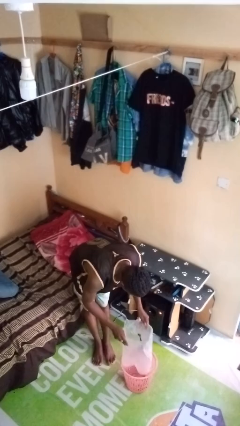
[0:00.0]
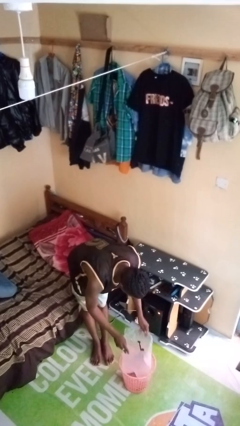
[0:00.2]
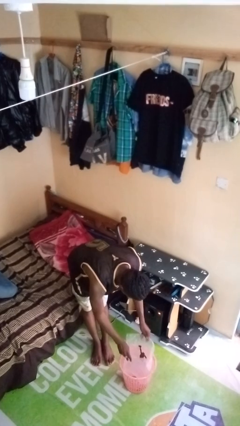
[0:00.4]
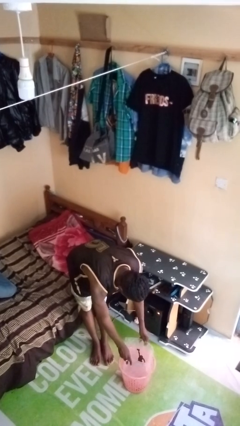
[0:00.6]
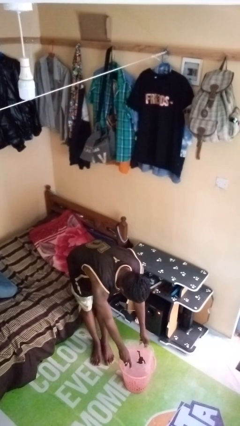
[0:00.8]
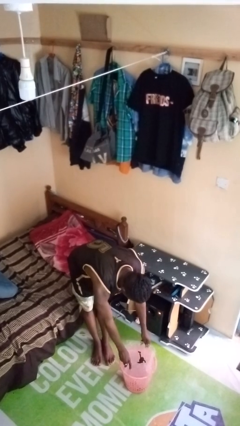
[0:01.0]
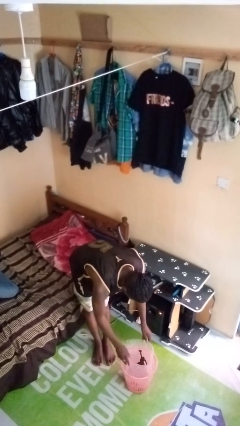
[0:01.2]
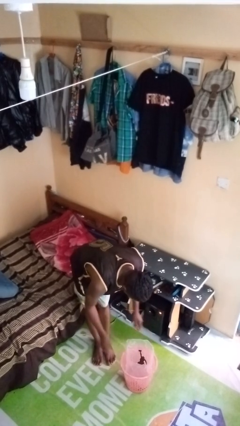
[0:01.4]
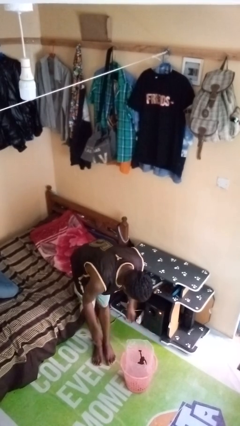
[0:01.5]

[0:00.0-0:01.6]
person inserts trashbag into trashcan

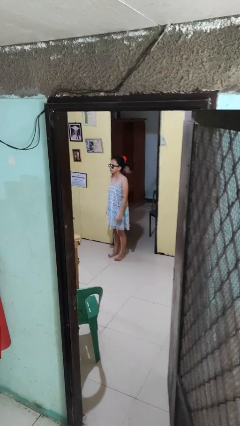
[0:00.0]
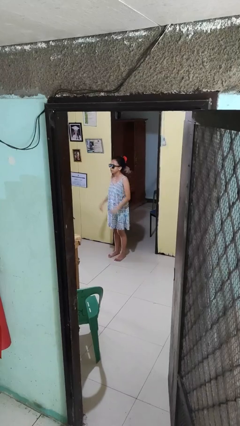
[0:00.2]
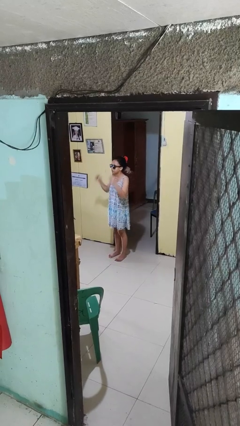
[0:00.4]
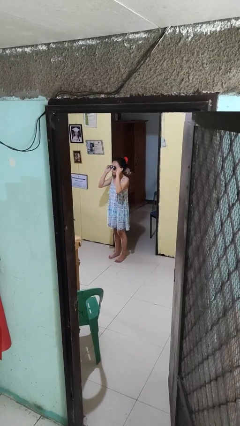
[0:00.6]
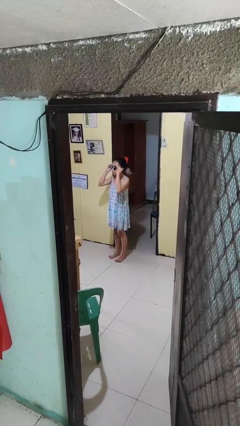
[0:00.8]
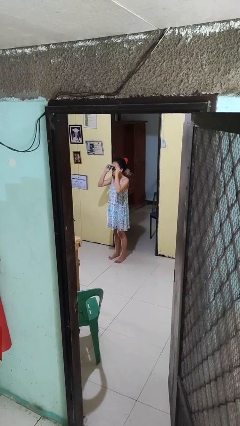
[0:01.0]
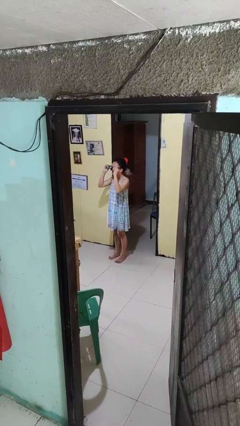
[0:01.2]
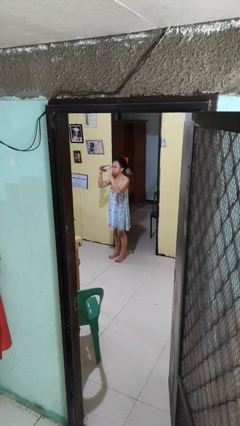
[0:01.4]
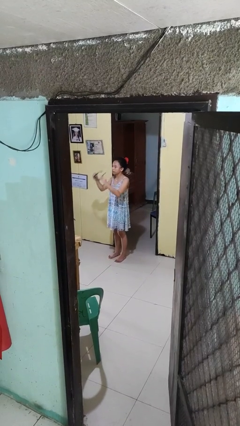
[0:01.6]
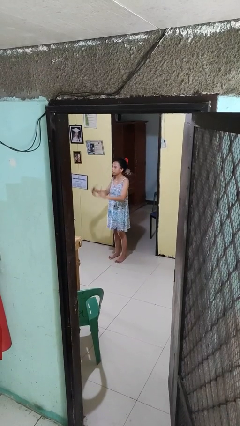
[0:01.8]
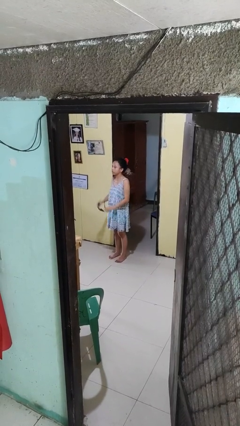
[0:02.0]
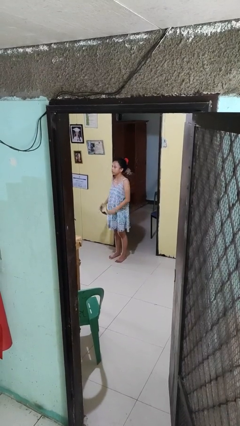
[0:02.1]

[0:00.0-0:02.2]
person takes off sunglasses

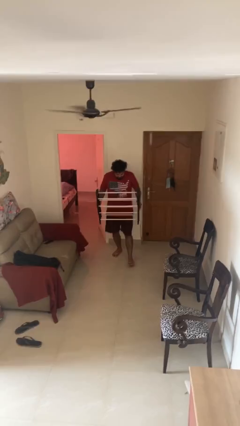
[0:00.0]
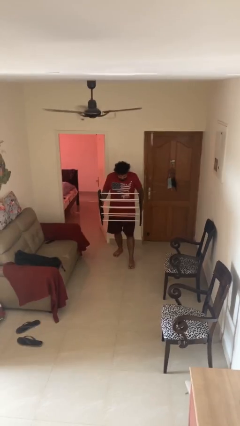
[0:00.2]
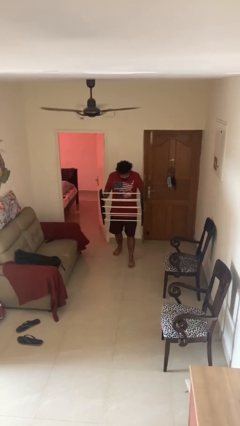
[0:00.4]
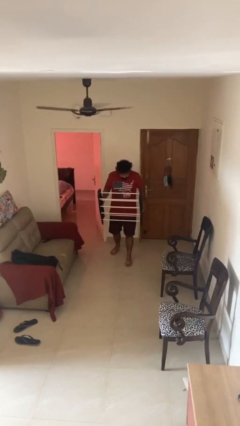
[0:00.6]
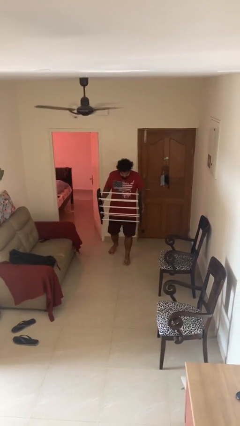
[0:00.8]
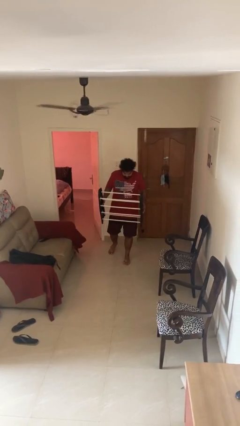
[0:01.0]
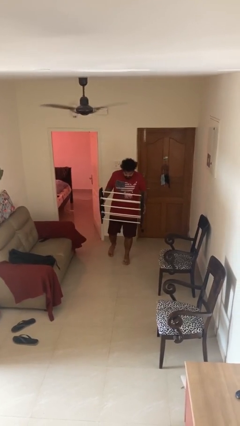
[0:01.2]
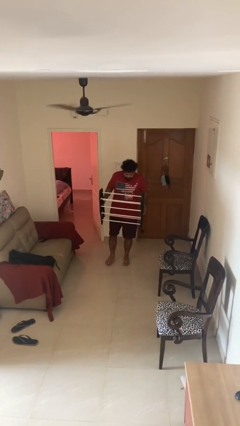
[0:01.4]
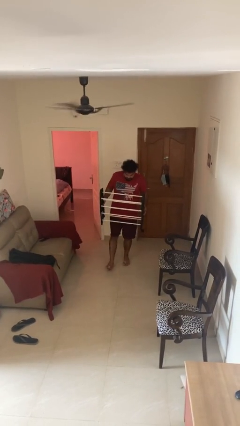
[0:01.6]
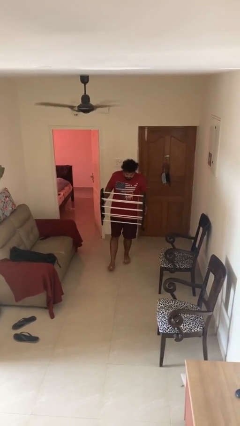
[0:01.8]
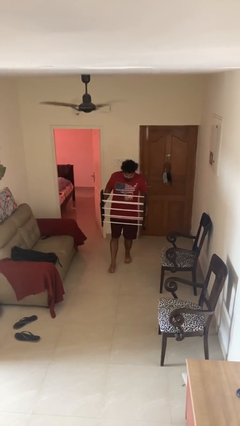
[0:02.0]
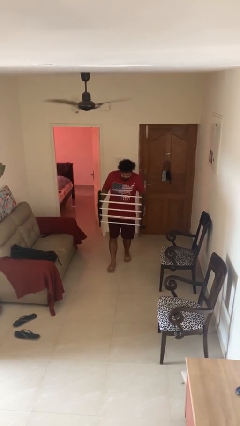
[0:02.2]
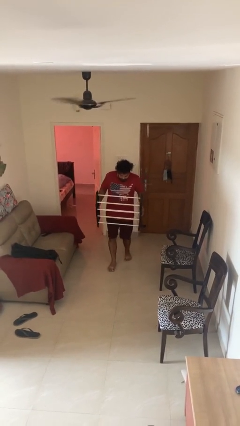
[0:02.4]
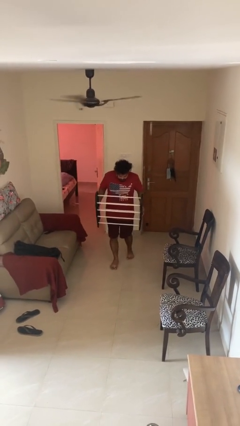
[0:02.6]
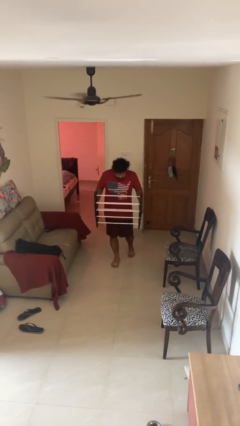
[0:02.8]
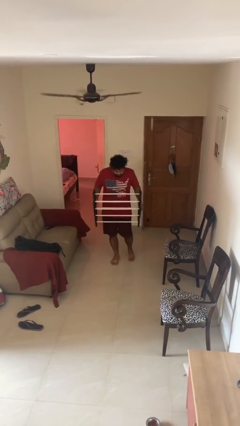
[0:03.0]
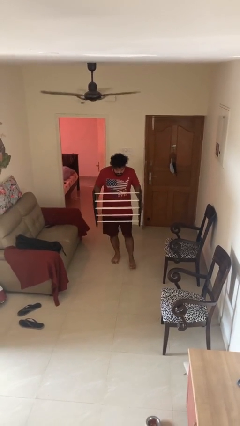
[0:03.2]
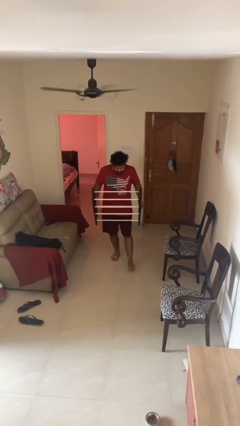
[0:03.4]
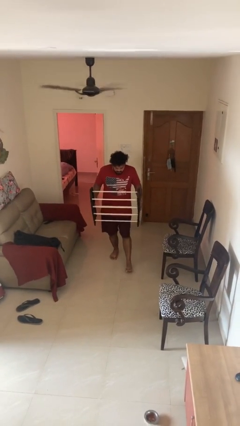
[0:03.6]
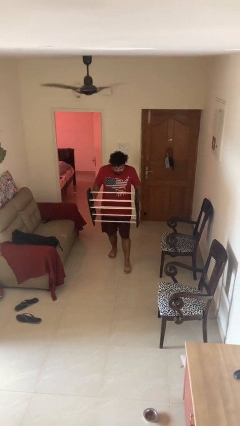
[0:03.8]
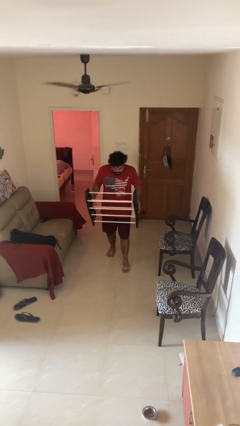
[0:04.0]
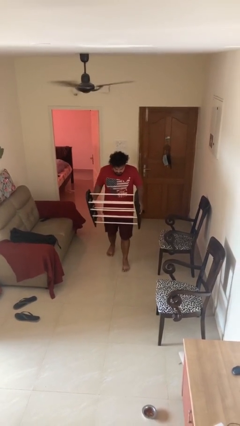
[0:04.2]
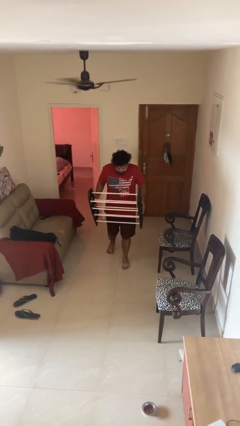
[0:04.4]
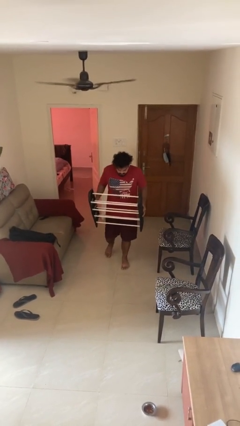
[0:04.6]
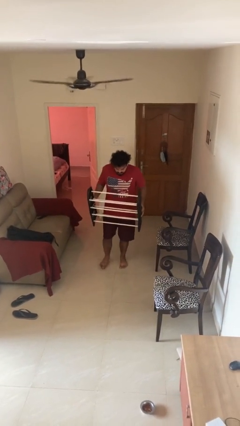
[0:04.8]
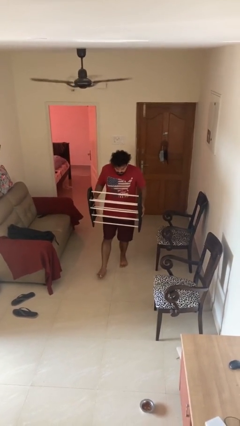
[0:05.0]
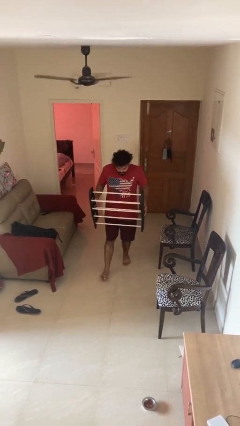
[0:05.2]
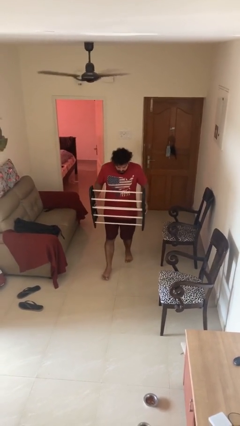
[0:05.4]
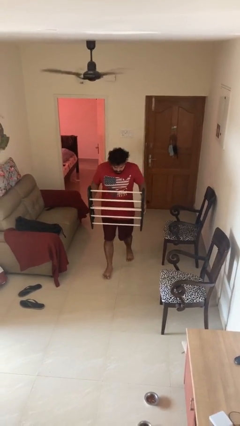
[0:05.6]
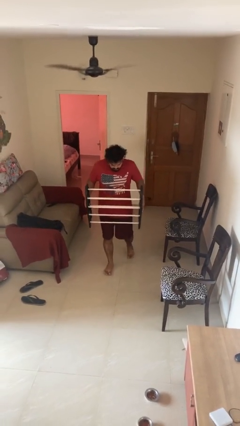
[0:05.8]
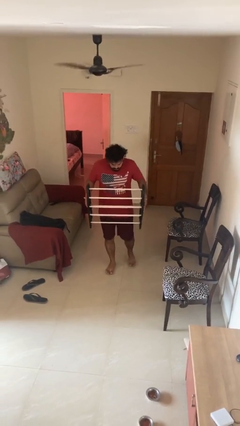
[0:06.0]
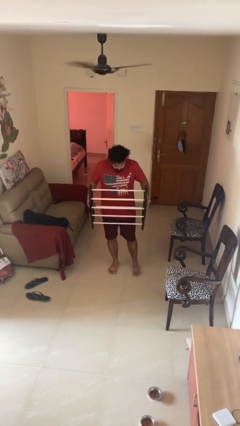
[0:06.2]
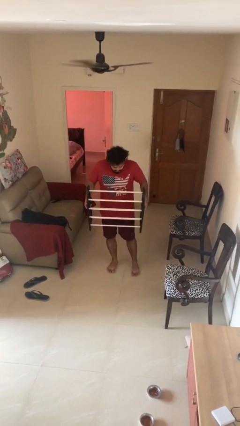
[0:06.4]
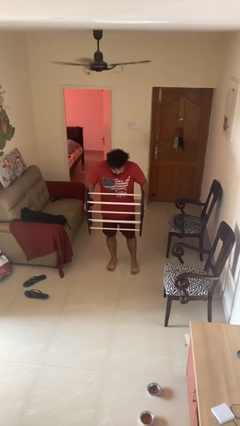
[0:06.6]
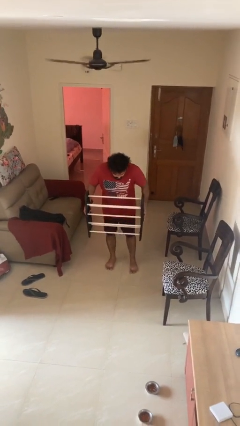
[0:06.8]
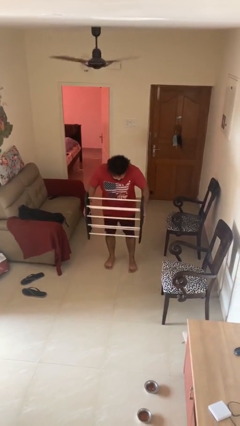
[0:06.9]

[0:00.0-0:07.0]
person carries heavy object

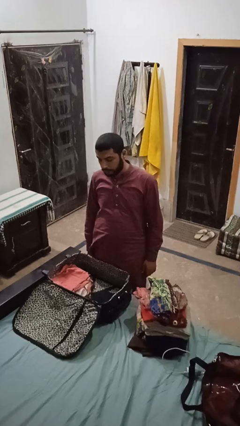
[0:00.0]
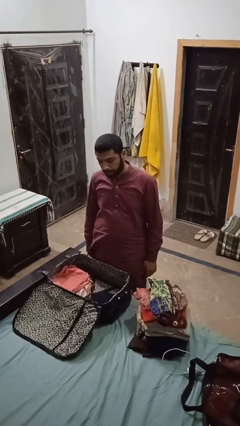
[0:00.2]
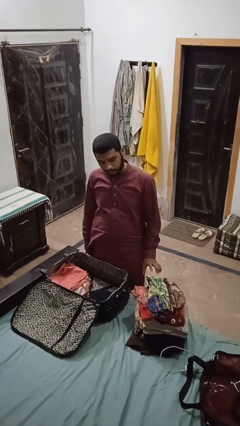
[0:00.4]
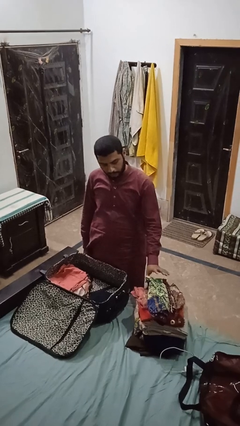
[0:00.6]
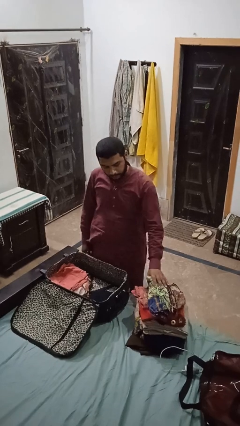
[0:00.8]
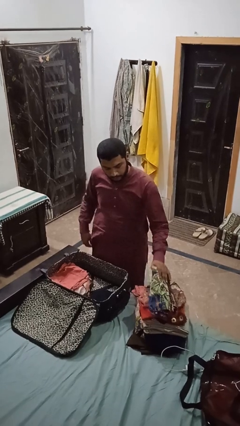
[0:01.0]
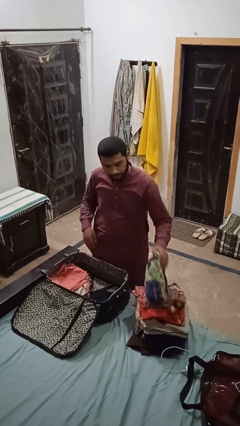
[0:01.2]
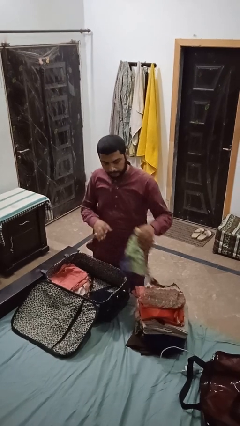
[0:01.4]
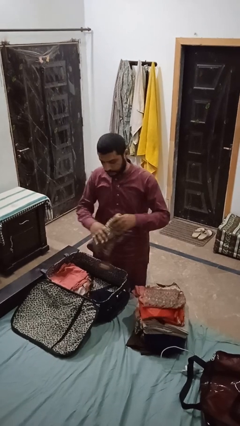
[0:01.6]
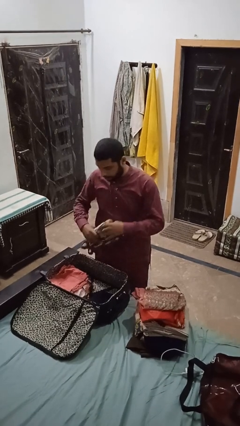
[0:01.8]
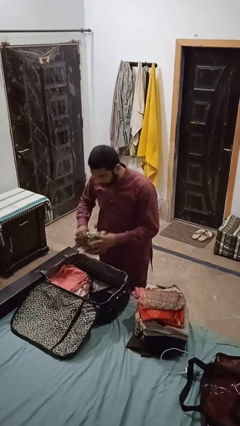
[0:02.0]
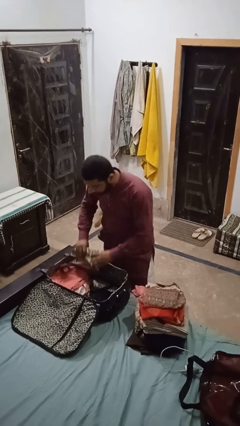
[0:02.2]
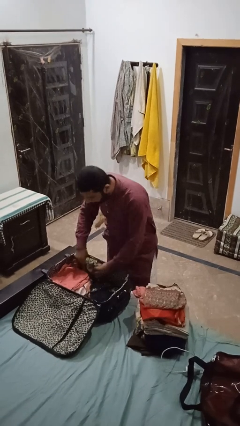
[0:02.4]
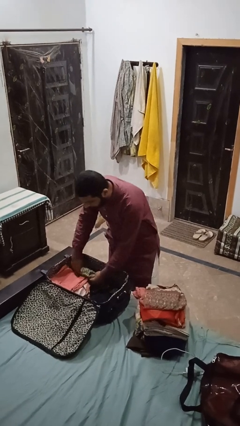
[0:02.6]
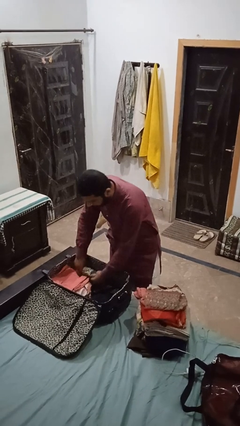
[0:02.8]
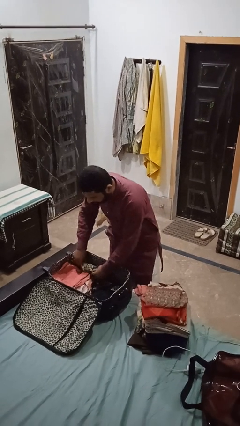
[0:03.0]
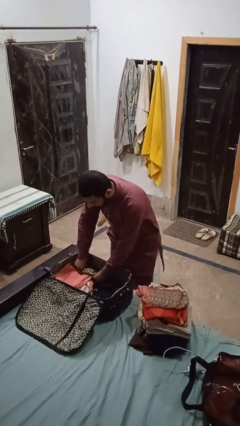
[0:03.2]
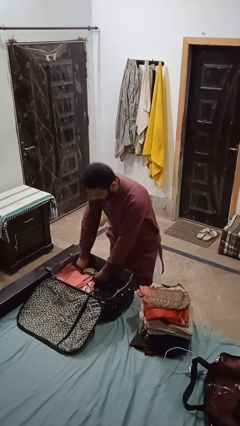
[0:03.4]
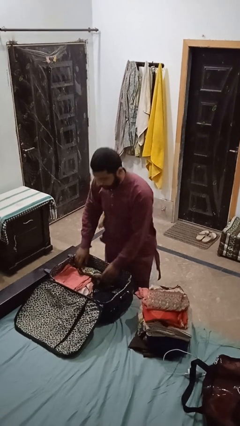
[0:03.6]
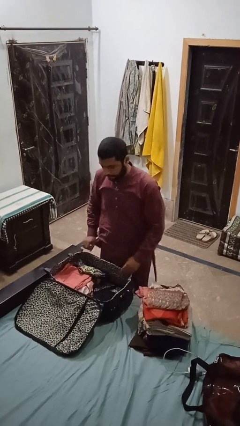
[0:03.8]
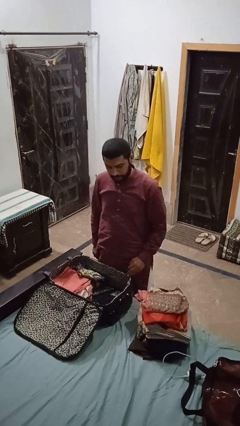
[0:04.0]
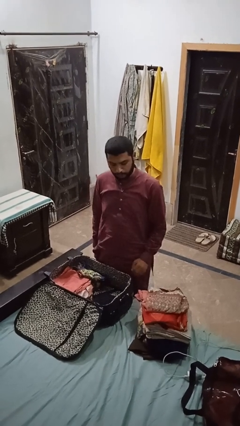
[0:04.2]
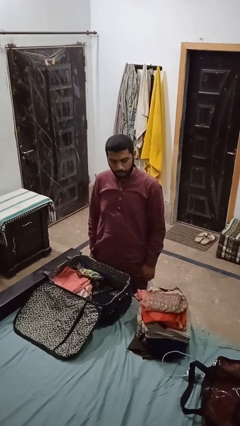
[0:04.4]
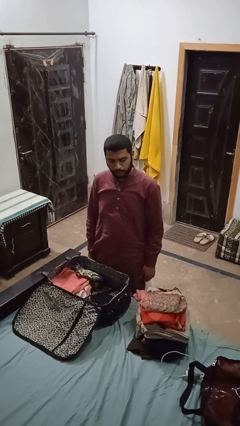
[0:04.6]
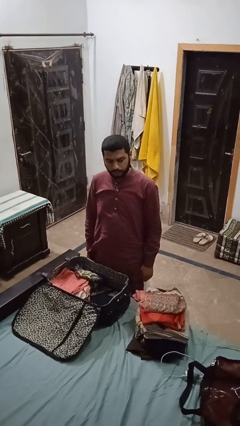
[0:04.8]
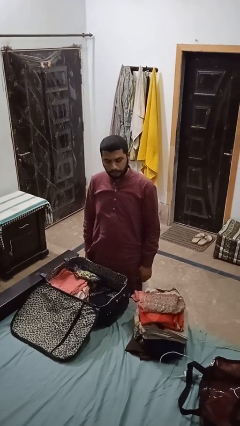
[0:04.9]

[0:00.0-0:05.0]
person loads clothes into suitcase

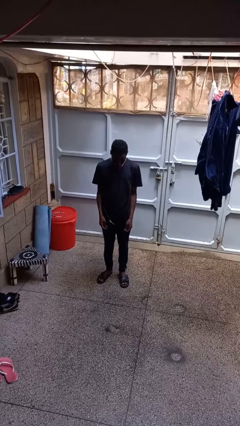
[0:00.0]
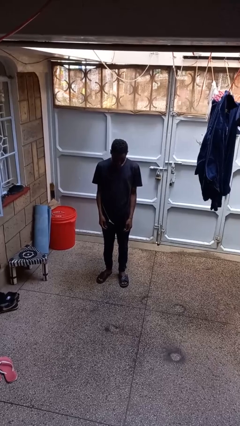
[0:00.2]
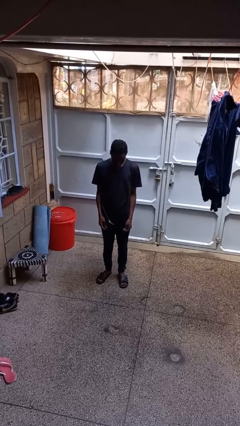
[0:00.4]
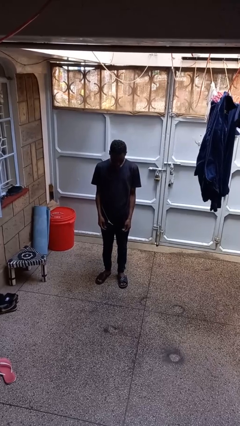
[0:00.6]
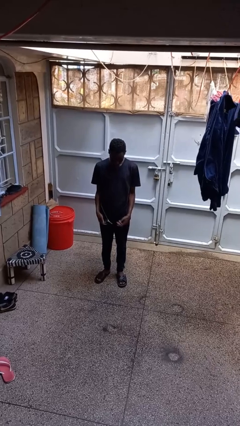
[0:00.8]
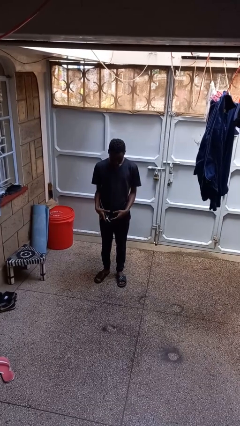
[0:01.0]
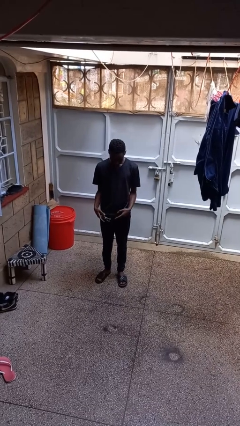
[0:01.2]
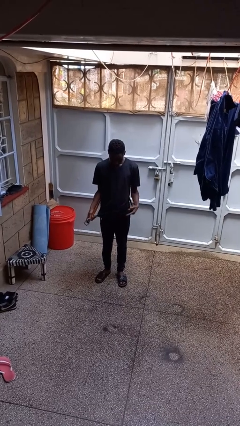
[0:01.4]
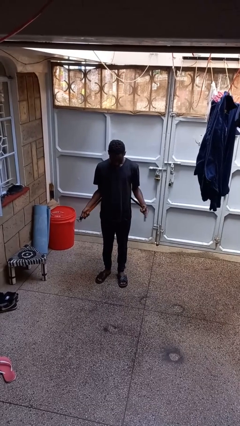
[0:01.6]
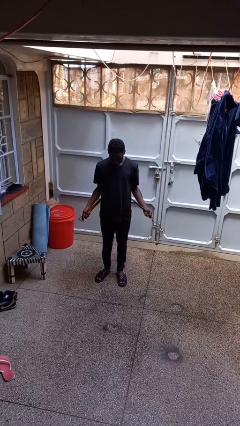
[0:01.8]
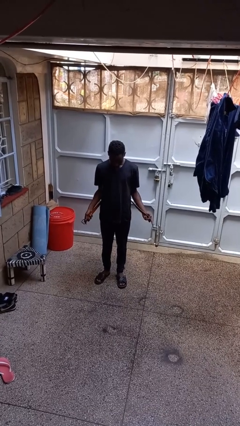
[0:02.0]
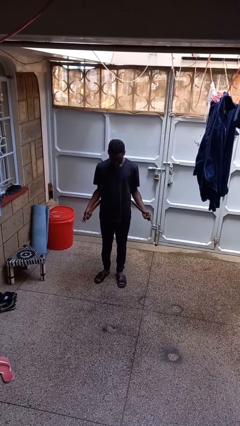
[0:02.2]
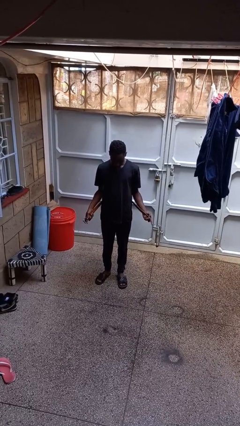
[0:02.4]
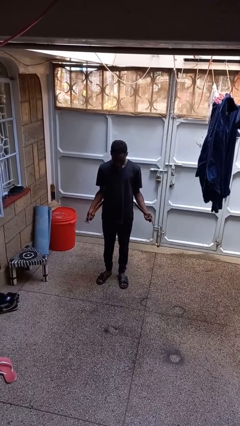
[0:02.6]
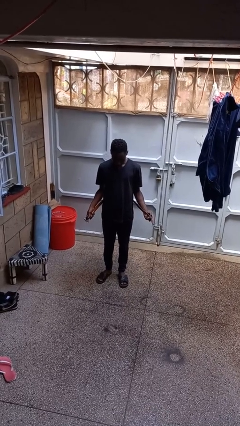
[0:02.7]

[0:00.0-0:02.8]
person takes off belt
